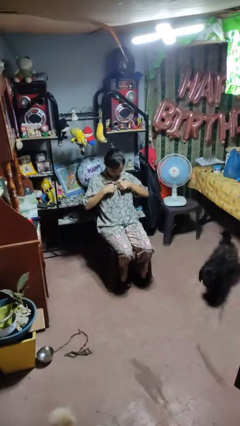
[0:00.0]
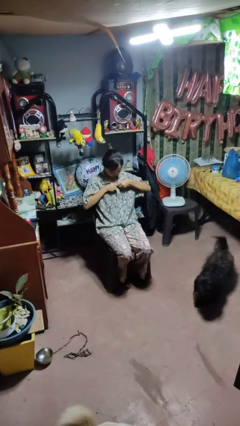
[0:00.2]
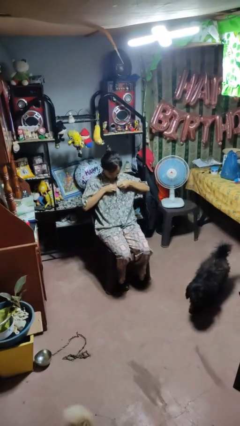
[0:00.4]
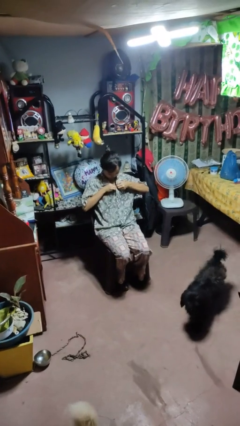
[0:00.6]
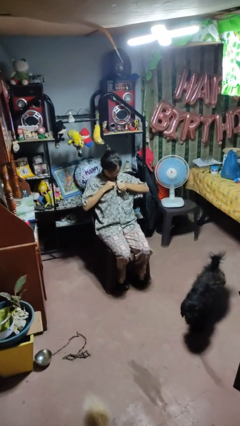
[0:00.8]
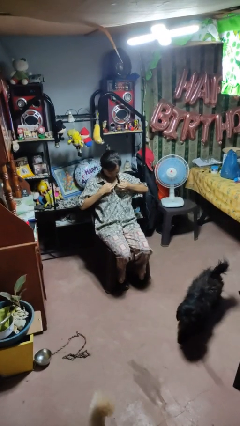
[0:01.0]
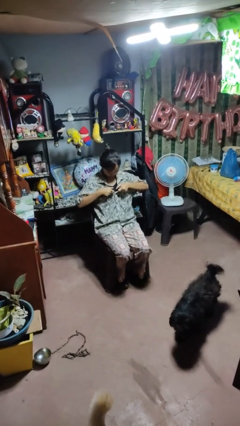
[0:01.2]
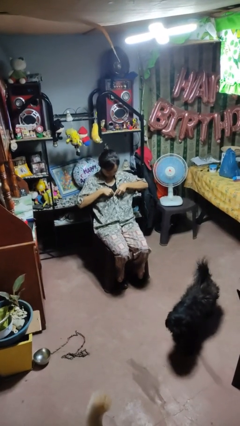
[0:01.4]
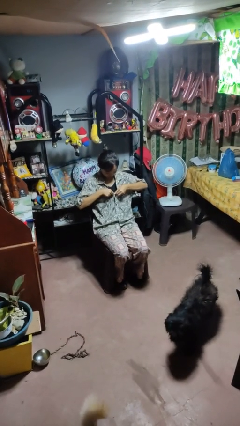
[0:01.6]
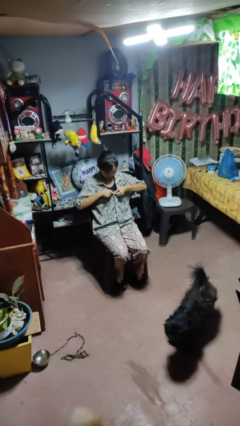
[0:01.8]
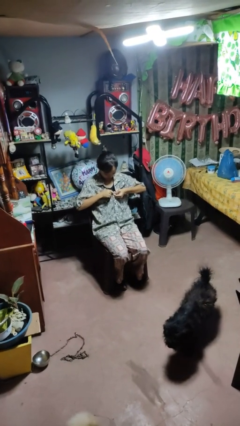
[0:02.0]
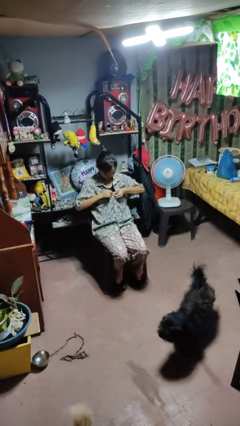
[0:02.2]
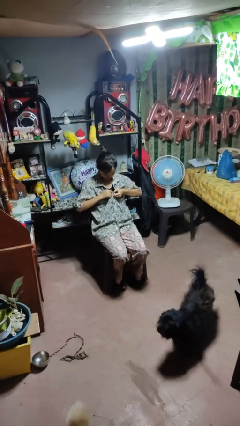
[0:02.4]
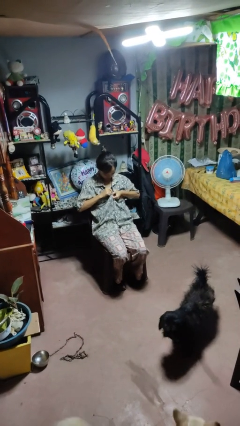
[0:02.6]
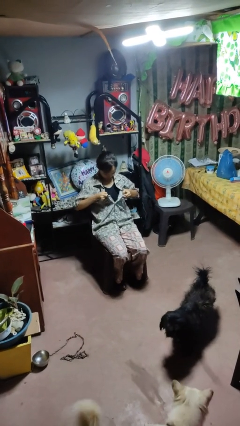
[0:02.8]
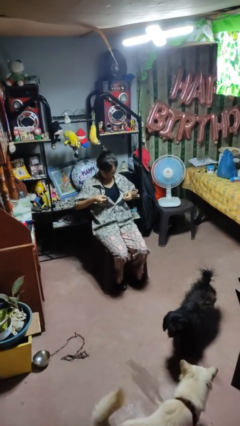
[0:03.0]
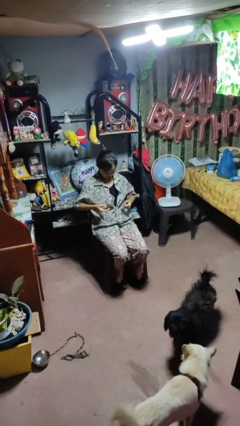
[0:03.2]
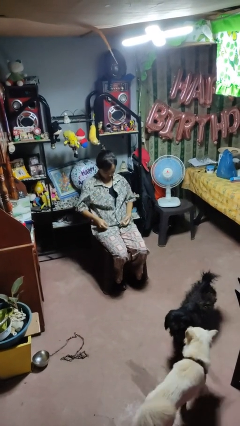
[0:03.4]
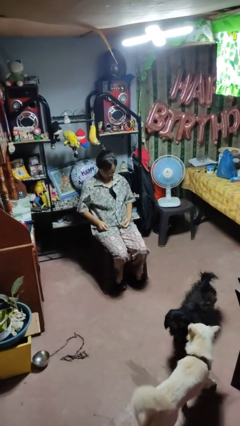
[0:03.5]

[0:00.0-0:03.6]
person unbuttons shirt

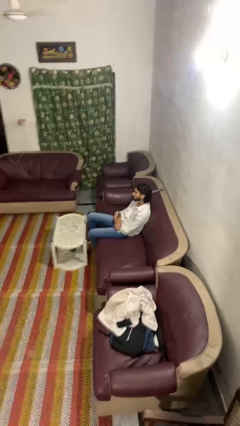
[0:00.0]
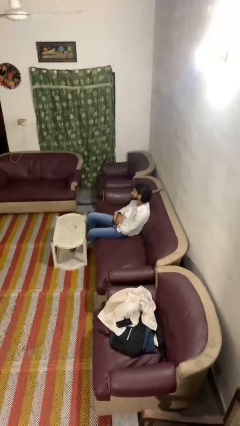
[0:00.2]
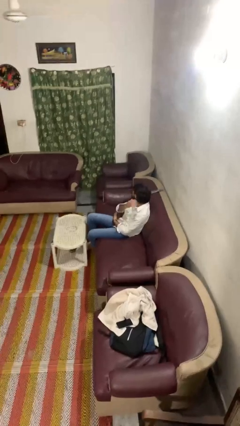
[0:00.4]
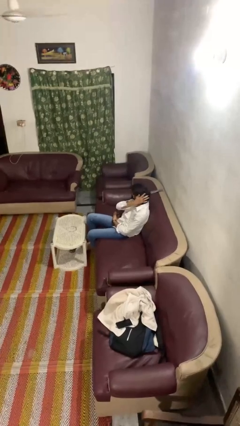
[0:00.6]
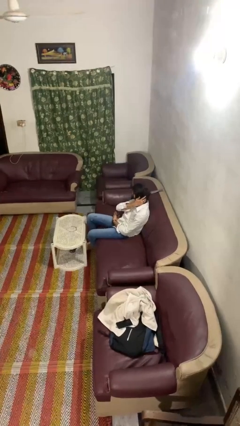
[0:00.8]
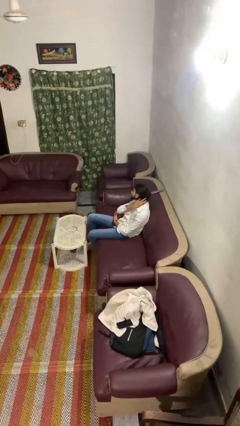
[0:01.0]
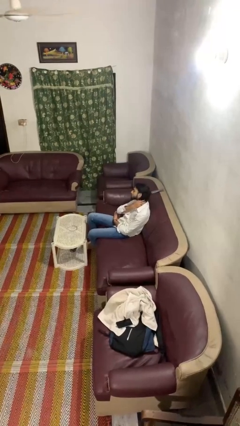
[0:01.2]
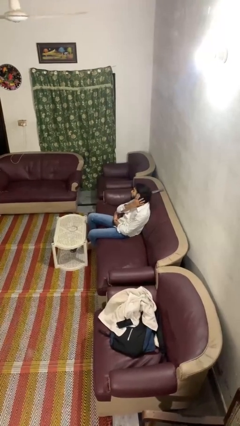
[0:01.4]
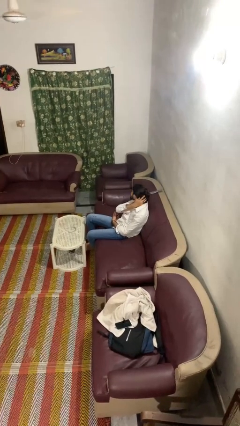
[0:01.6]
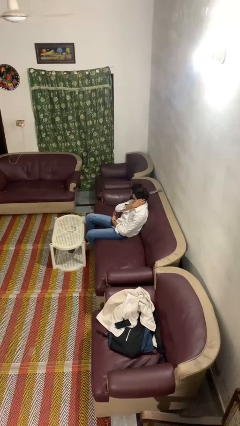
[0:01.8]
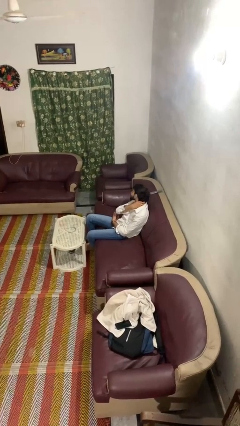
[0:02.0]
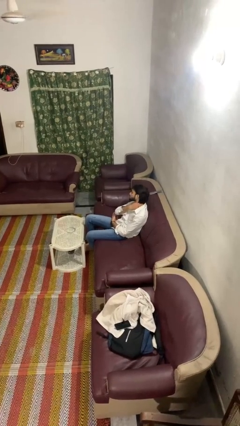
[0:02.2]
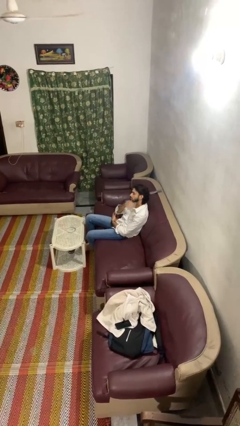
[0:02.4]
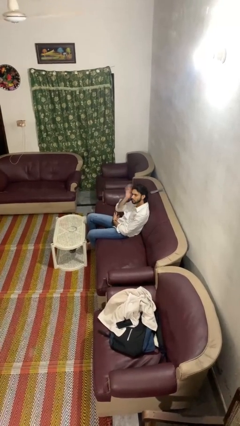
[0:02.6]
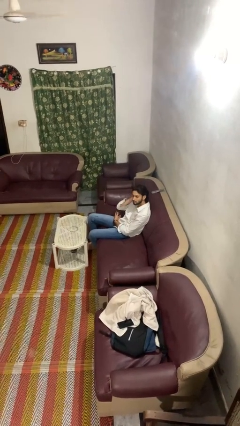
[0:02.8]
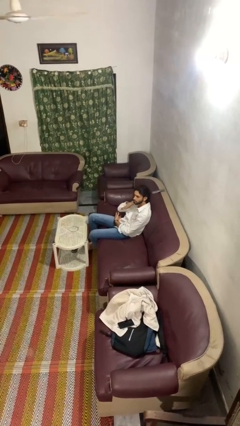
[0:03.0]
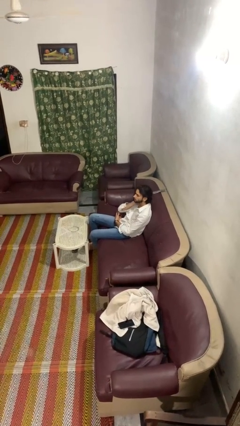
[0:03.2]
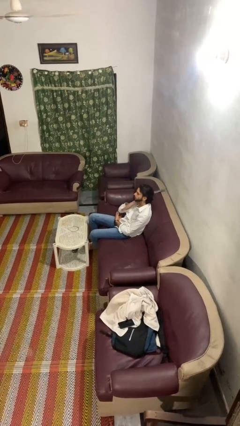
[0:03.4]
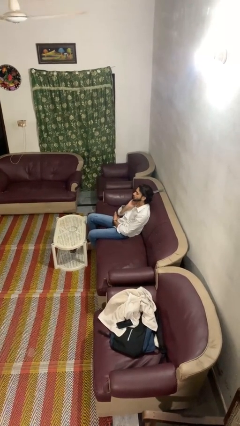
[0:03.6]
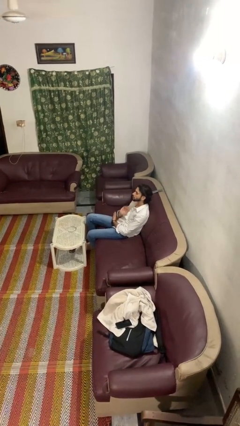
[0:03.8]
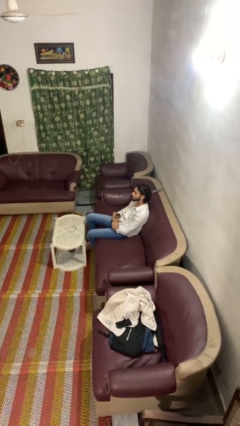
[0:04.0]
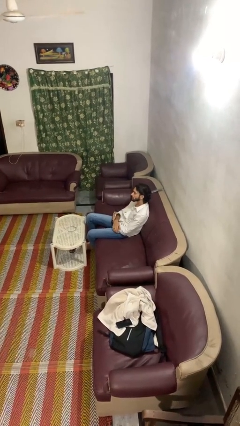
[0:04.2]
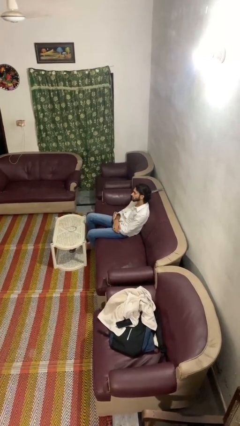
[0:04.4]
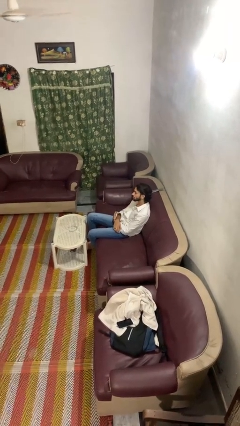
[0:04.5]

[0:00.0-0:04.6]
person strokes hair

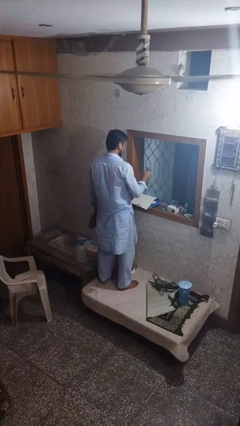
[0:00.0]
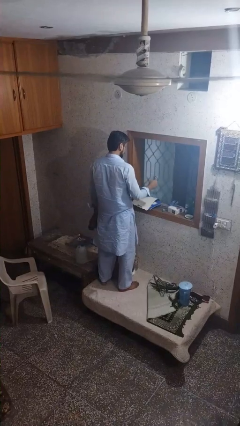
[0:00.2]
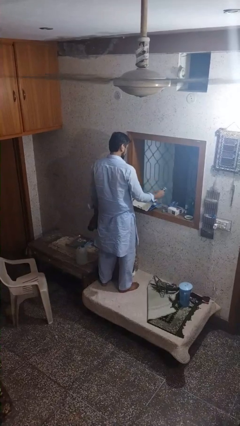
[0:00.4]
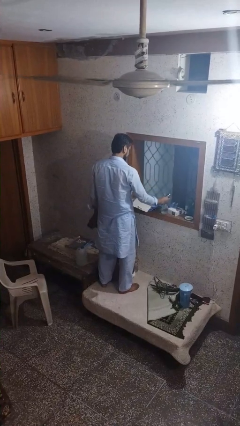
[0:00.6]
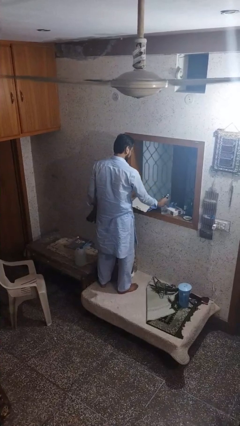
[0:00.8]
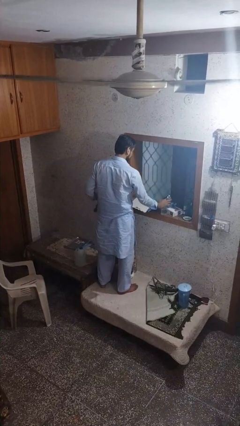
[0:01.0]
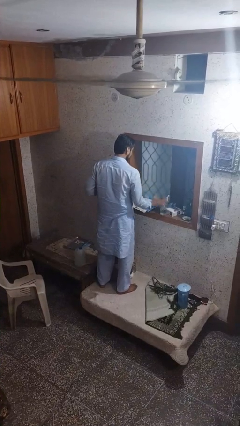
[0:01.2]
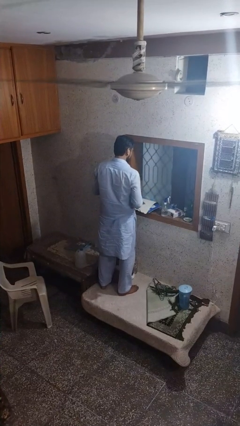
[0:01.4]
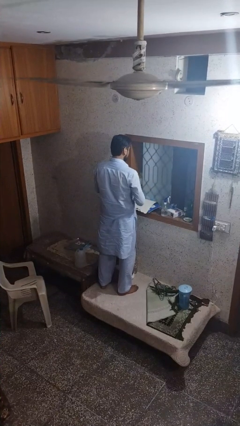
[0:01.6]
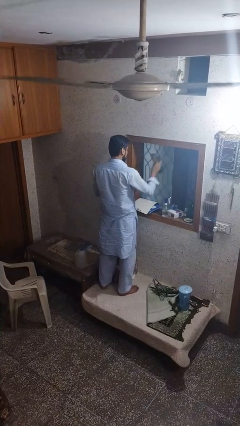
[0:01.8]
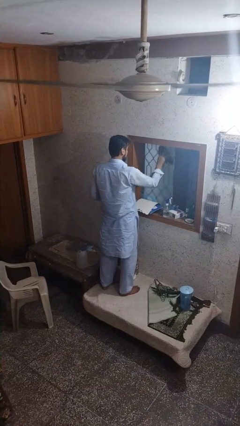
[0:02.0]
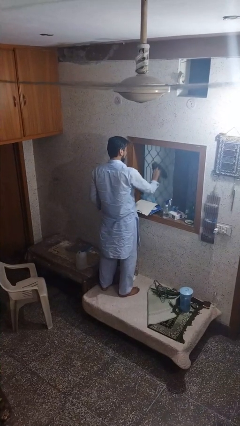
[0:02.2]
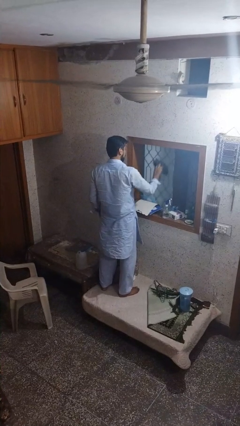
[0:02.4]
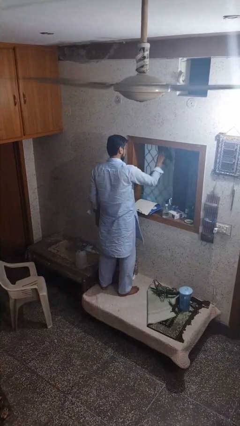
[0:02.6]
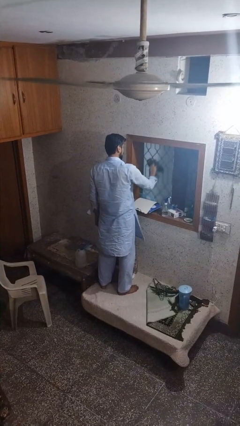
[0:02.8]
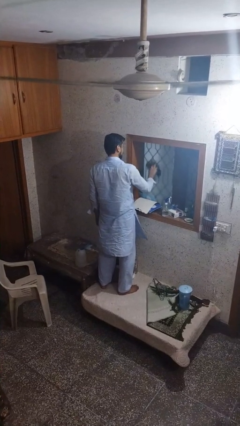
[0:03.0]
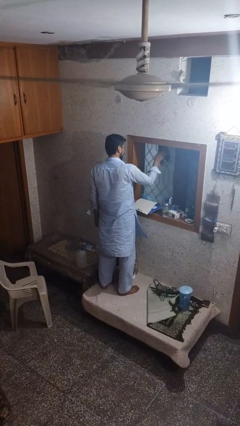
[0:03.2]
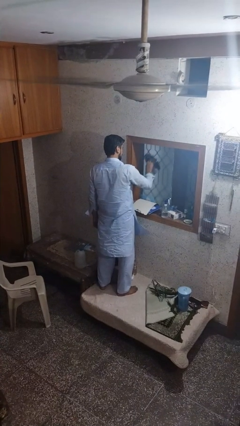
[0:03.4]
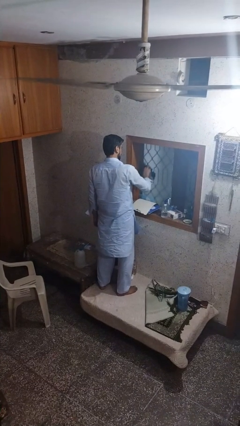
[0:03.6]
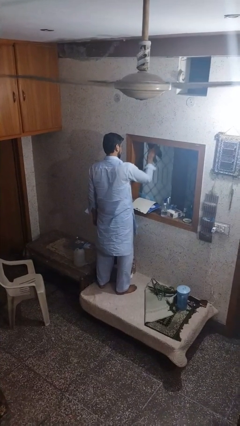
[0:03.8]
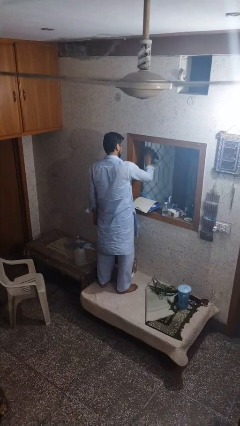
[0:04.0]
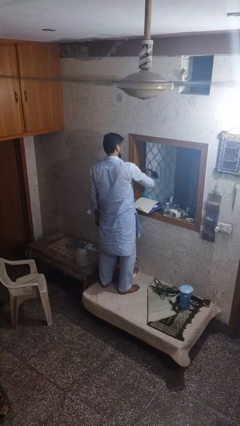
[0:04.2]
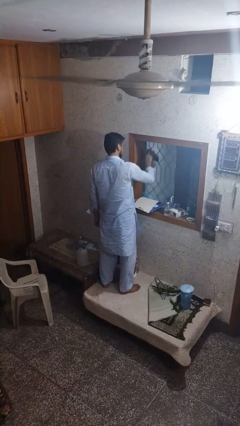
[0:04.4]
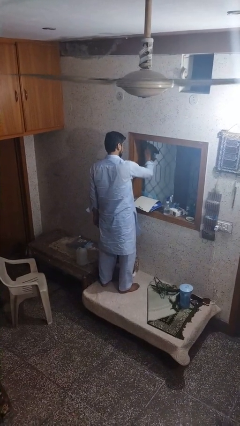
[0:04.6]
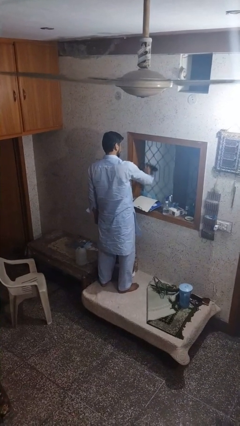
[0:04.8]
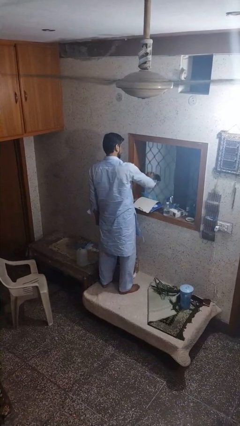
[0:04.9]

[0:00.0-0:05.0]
person washes window

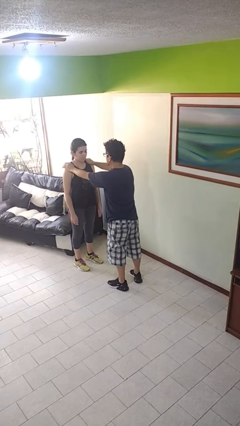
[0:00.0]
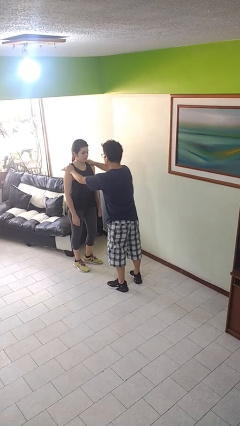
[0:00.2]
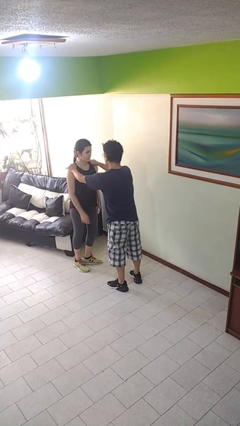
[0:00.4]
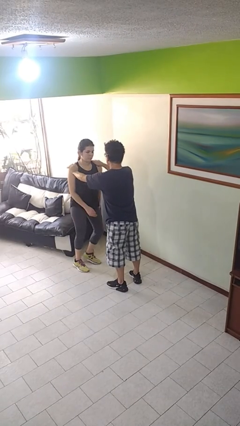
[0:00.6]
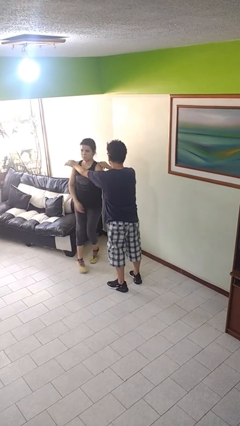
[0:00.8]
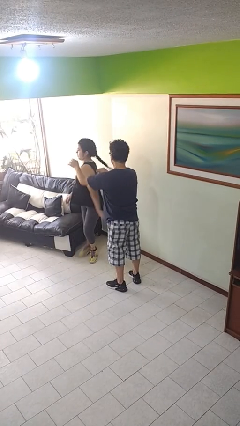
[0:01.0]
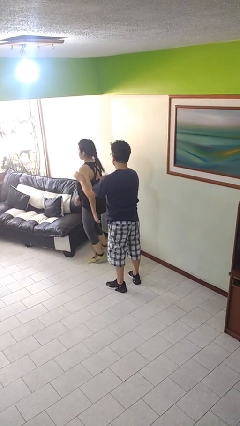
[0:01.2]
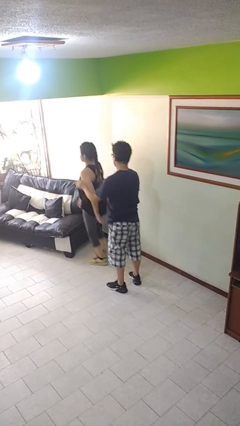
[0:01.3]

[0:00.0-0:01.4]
person spins person around

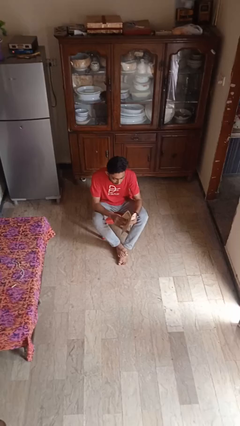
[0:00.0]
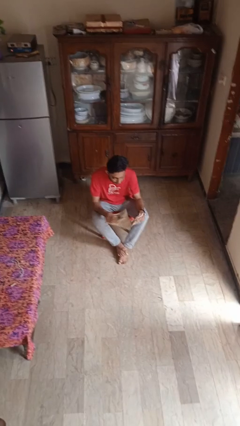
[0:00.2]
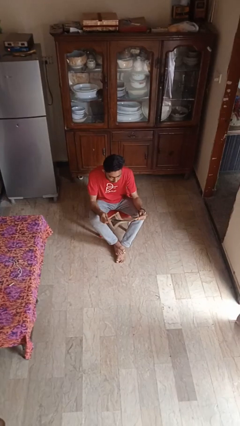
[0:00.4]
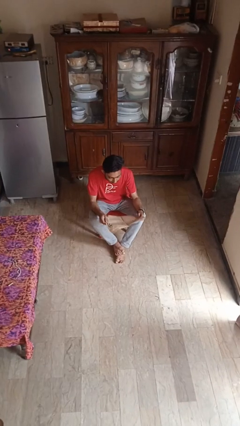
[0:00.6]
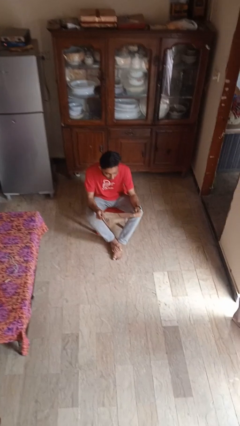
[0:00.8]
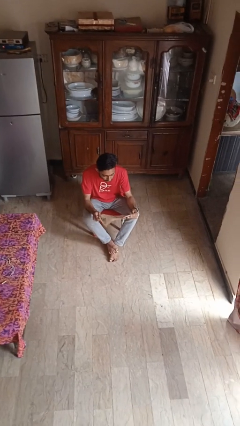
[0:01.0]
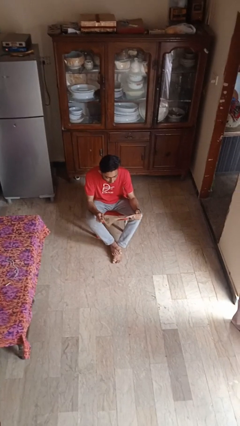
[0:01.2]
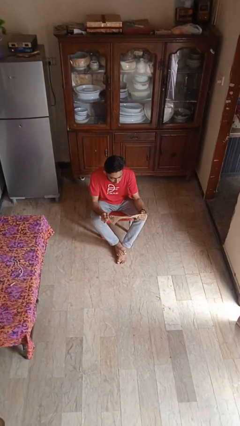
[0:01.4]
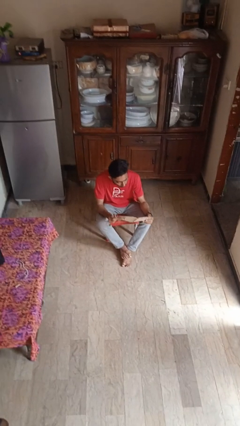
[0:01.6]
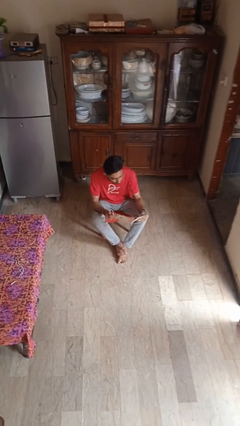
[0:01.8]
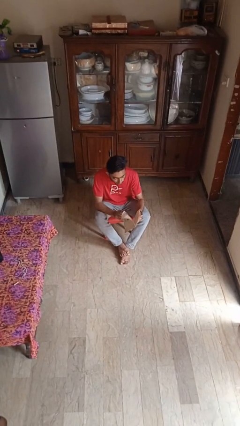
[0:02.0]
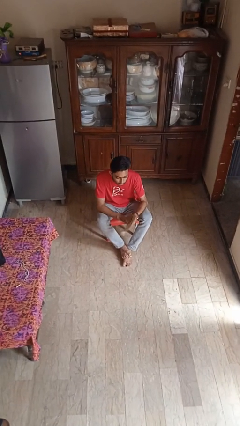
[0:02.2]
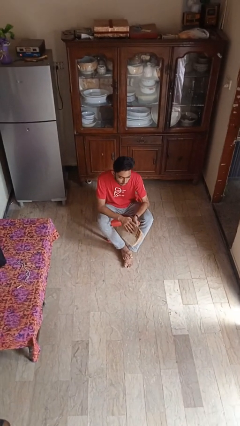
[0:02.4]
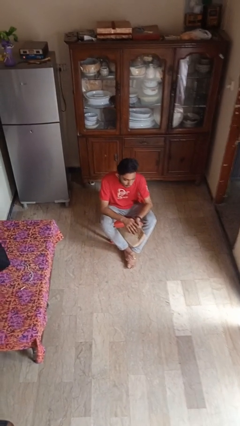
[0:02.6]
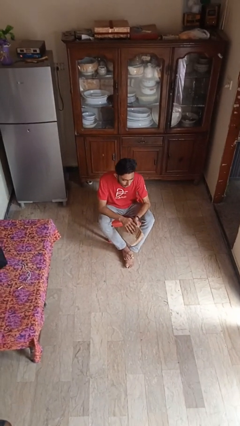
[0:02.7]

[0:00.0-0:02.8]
person reads newspaper

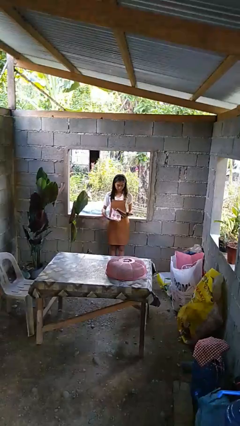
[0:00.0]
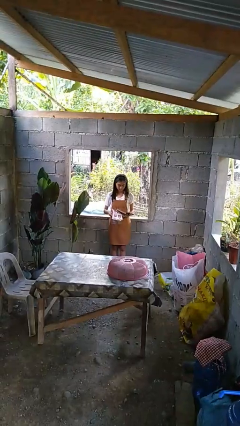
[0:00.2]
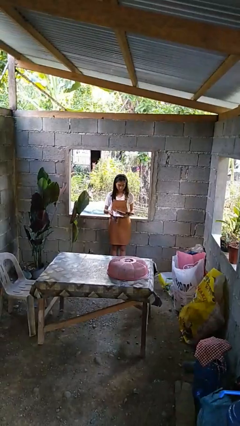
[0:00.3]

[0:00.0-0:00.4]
person tears paper
